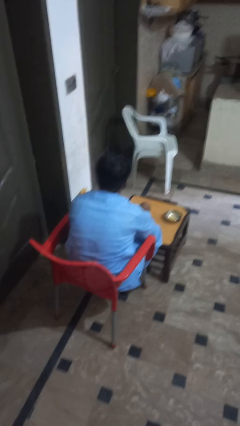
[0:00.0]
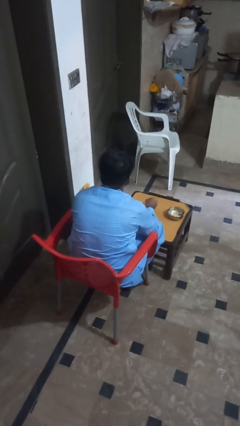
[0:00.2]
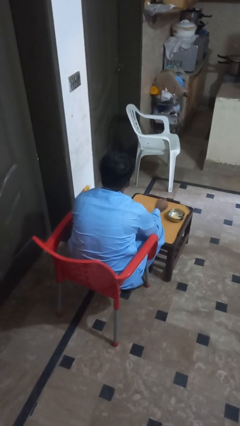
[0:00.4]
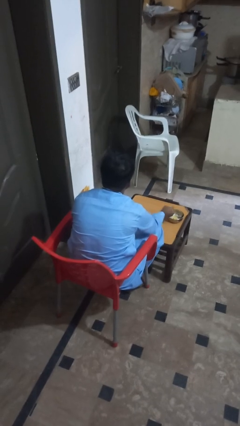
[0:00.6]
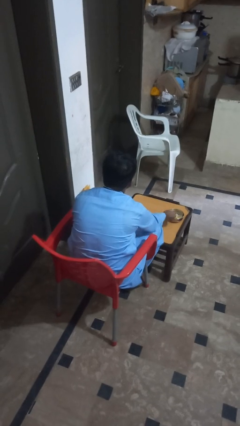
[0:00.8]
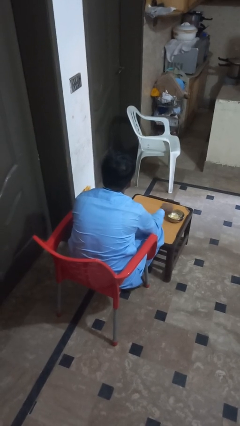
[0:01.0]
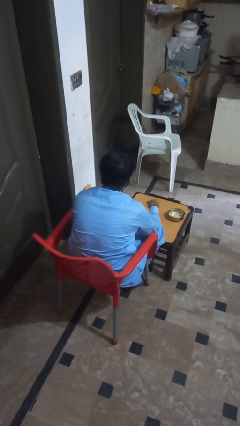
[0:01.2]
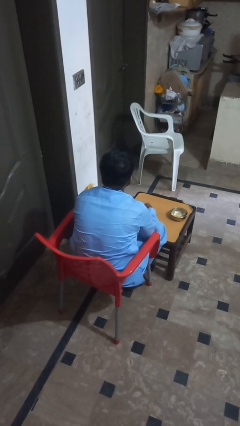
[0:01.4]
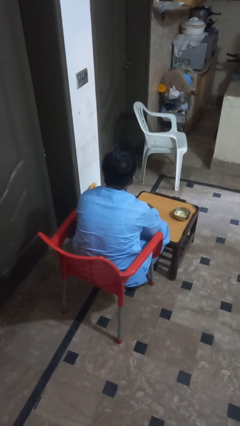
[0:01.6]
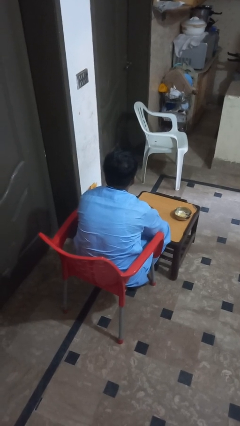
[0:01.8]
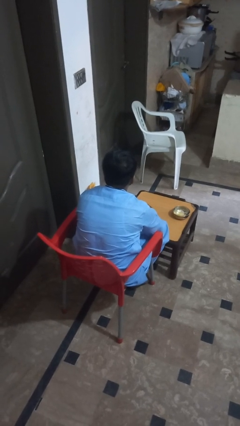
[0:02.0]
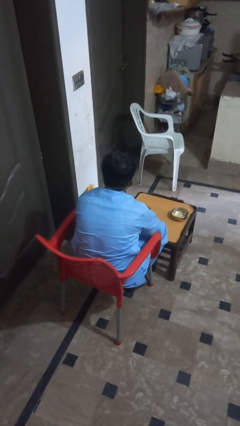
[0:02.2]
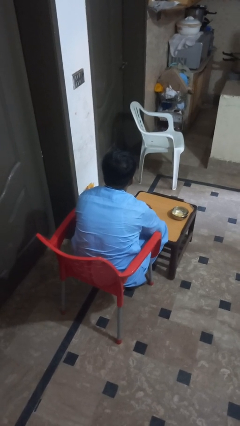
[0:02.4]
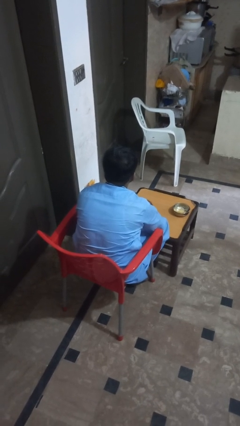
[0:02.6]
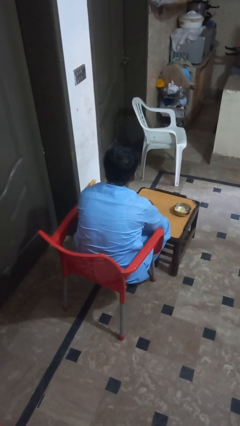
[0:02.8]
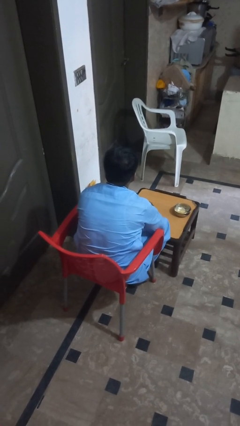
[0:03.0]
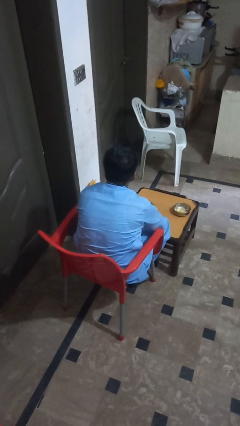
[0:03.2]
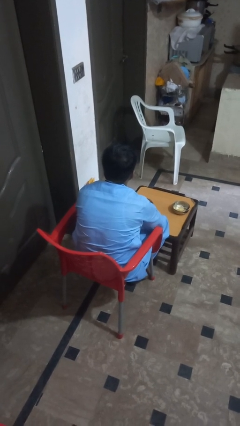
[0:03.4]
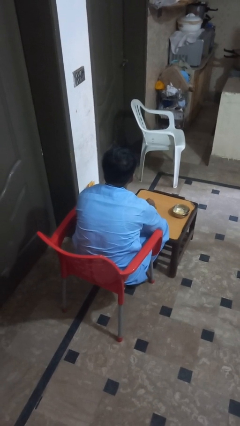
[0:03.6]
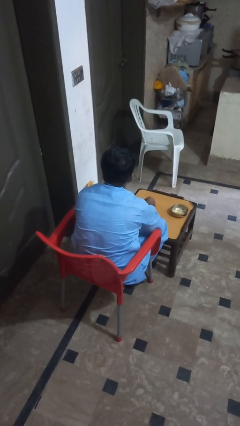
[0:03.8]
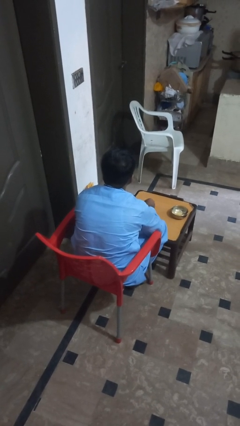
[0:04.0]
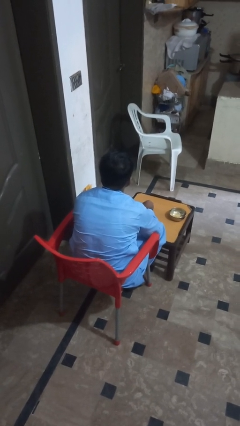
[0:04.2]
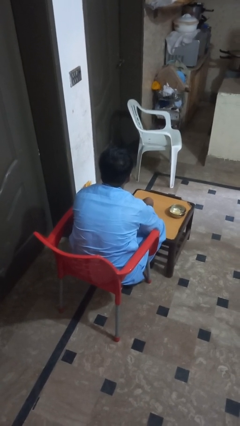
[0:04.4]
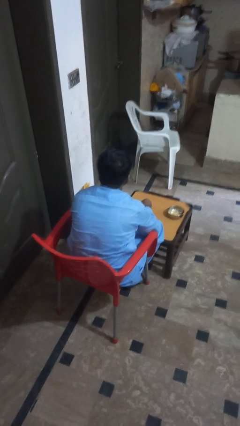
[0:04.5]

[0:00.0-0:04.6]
person pours into bowl

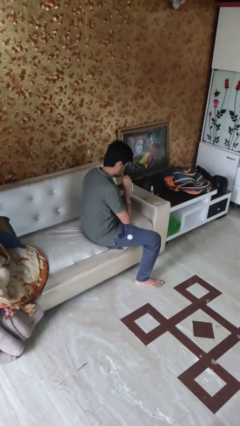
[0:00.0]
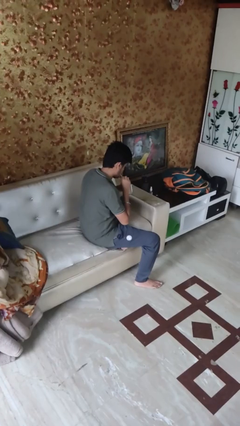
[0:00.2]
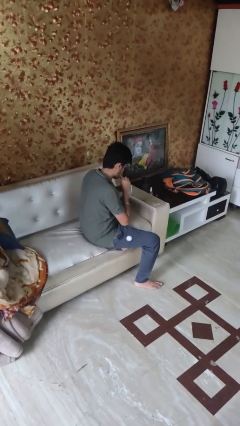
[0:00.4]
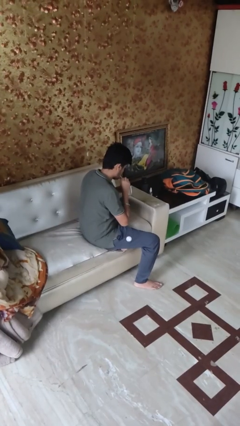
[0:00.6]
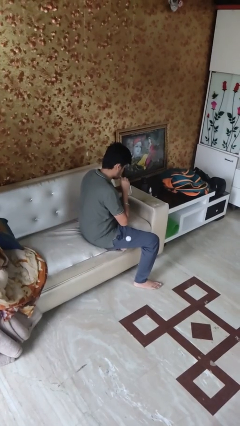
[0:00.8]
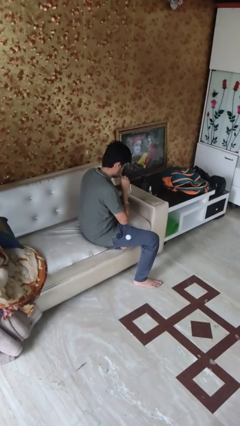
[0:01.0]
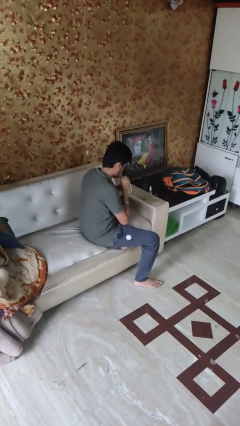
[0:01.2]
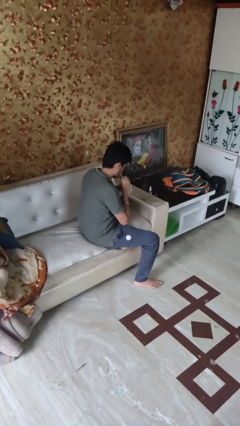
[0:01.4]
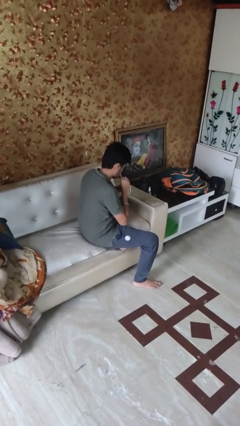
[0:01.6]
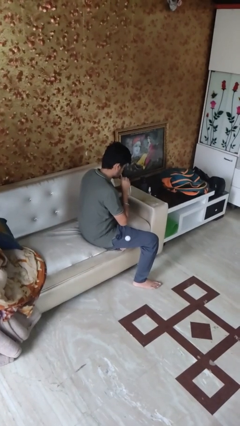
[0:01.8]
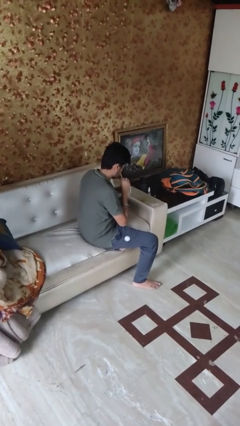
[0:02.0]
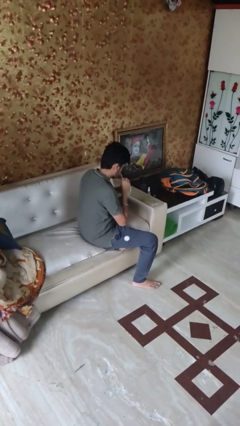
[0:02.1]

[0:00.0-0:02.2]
person drinks from straw

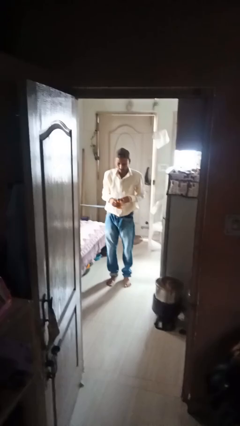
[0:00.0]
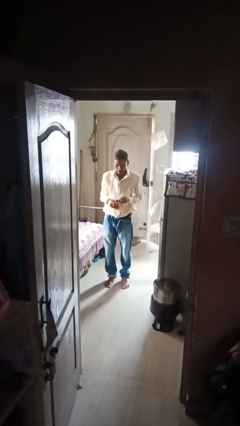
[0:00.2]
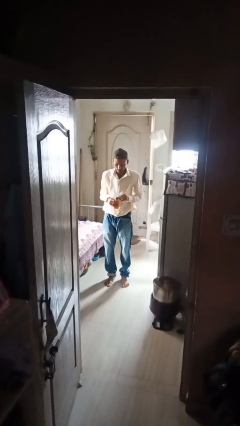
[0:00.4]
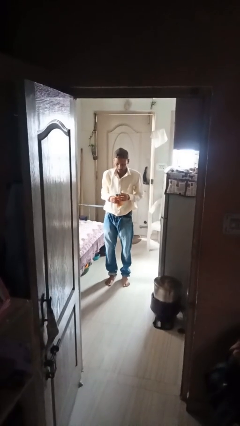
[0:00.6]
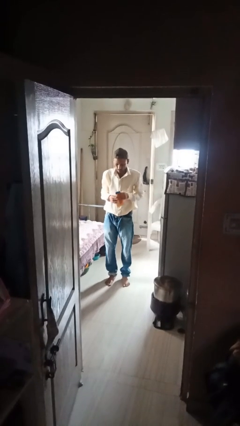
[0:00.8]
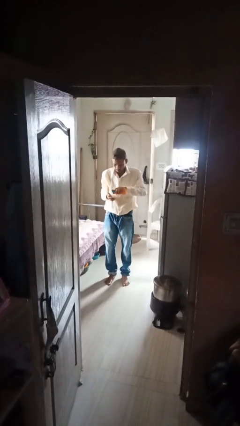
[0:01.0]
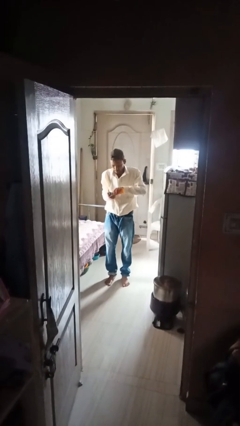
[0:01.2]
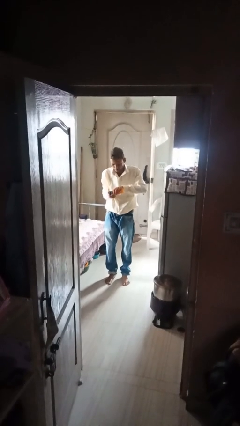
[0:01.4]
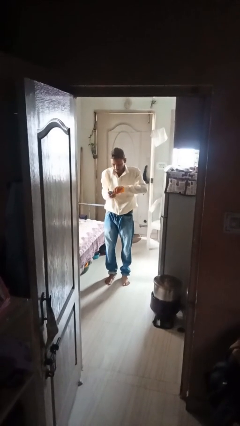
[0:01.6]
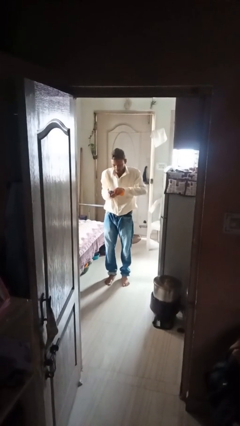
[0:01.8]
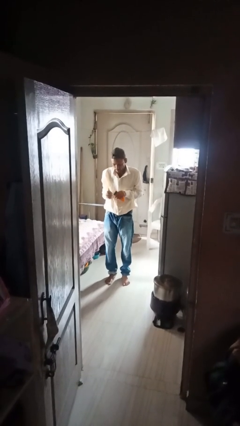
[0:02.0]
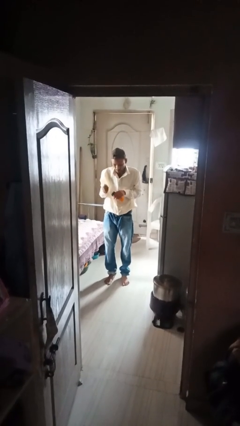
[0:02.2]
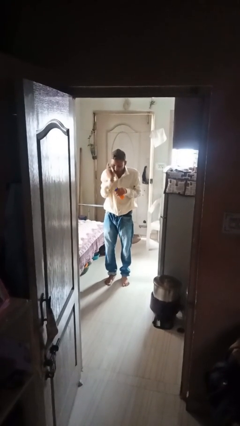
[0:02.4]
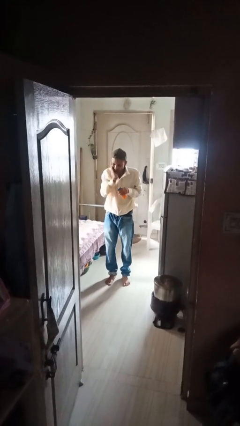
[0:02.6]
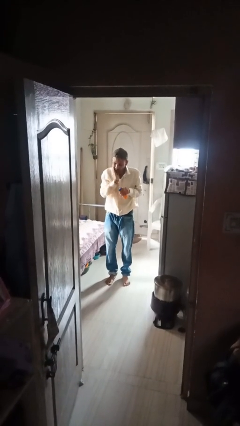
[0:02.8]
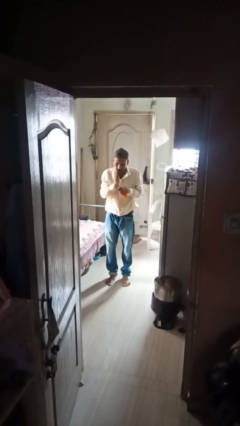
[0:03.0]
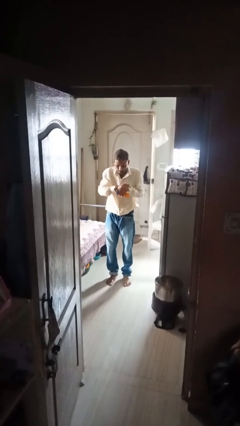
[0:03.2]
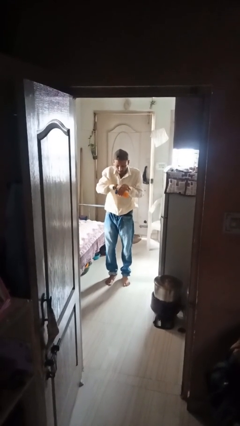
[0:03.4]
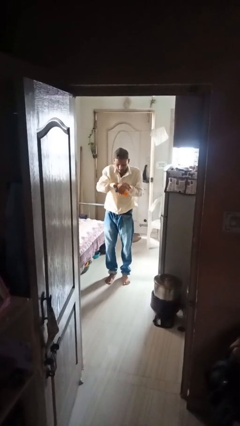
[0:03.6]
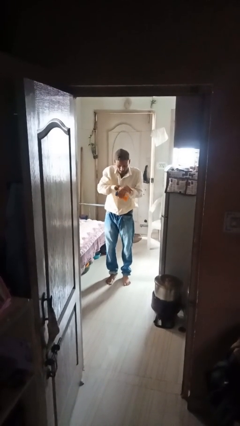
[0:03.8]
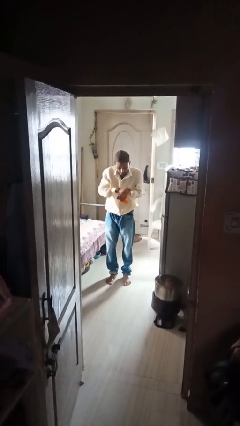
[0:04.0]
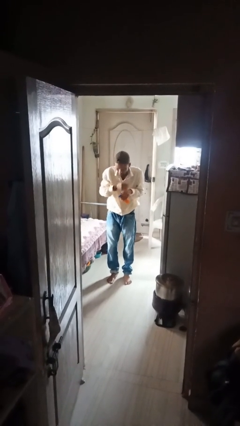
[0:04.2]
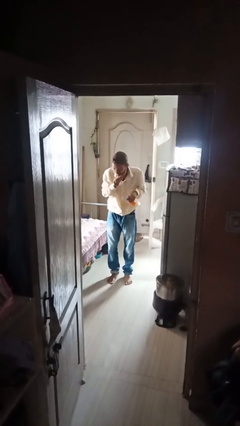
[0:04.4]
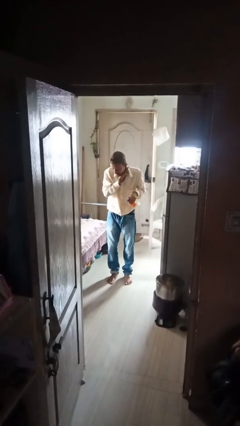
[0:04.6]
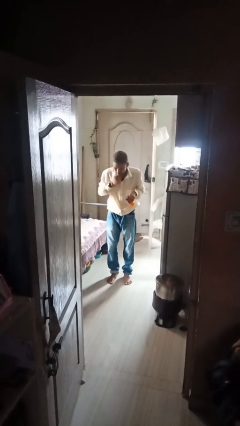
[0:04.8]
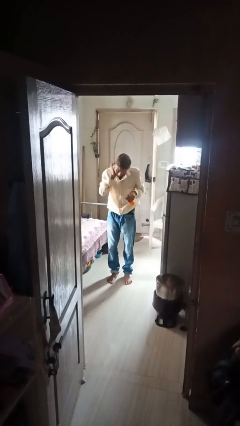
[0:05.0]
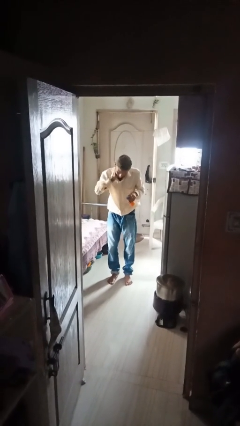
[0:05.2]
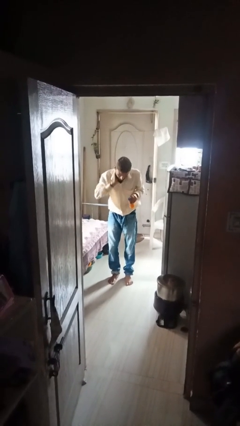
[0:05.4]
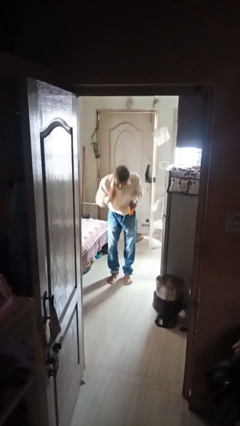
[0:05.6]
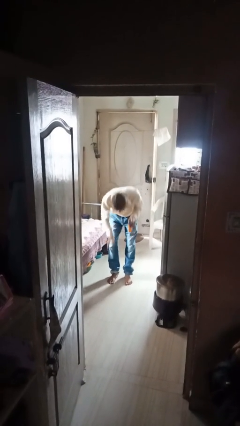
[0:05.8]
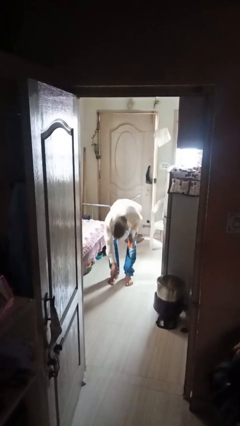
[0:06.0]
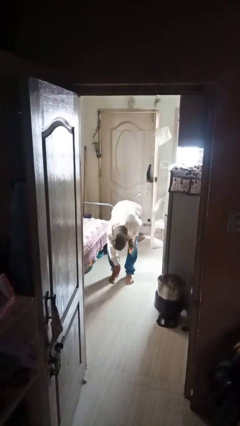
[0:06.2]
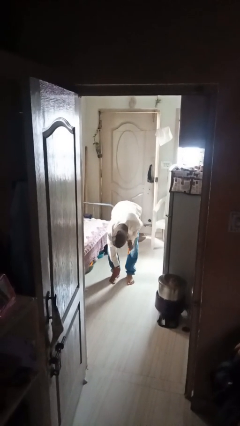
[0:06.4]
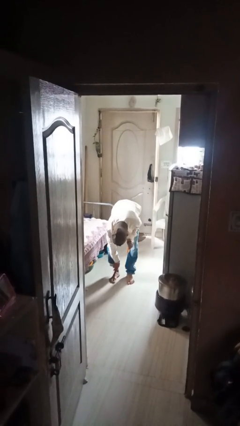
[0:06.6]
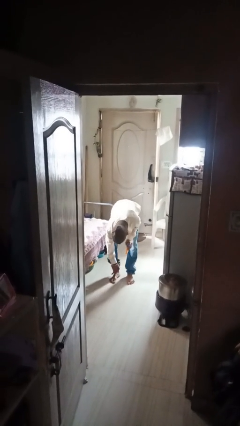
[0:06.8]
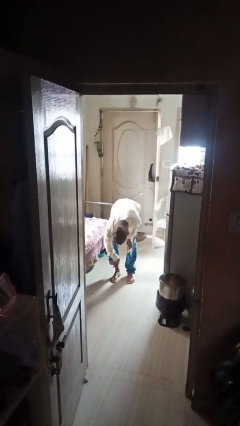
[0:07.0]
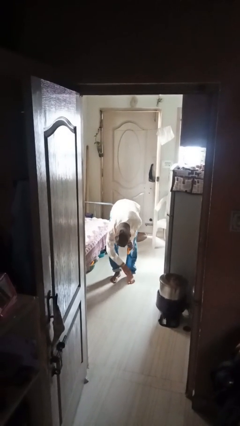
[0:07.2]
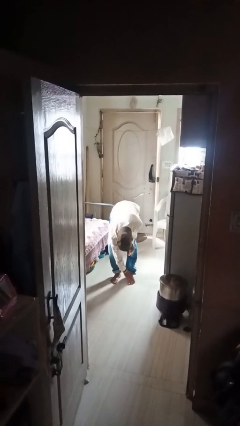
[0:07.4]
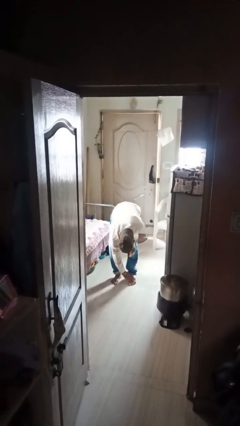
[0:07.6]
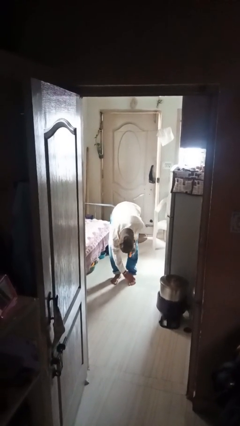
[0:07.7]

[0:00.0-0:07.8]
person applies sunscreen

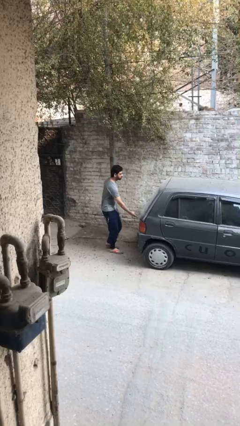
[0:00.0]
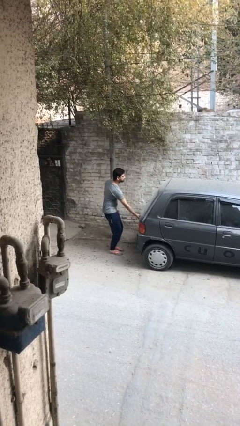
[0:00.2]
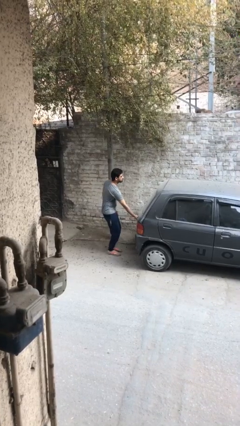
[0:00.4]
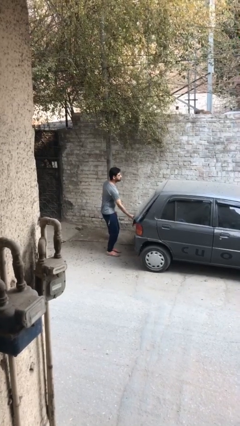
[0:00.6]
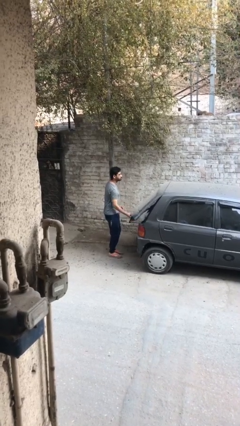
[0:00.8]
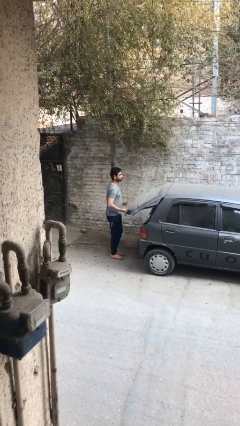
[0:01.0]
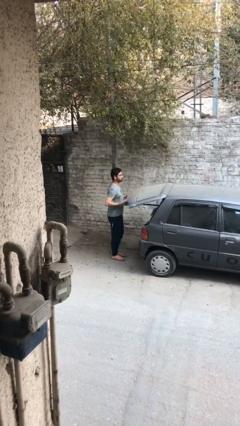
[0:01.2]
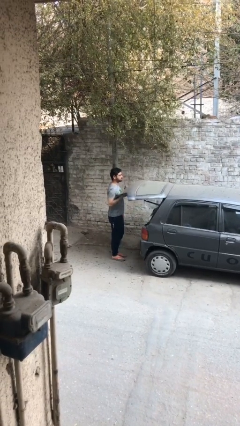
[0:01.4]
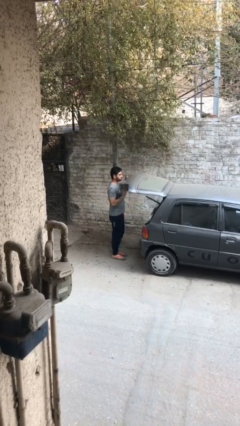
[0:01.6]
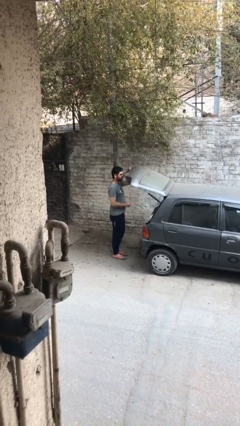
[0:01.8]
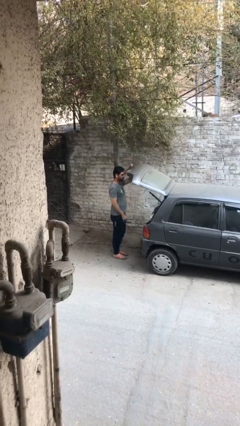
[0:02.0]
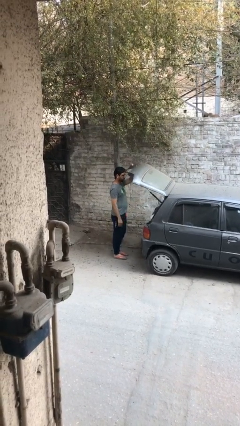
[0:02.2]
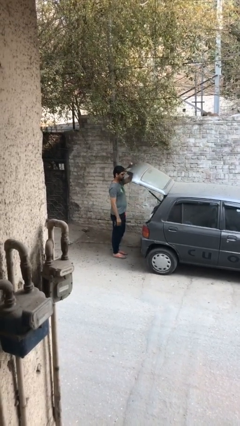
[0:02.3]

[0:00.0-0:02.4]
person opens car trunk
